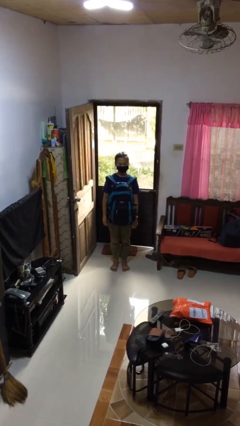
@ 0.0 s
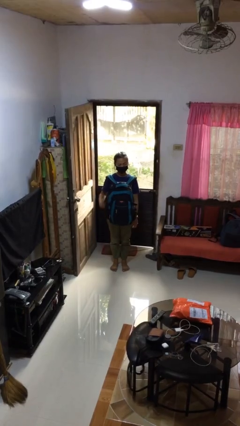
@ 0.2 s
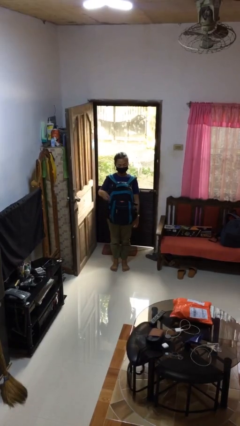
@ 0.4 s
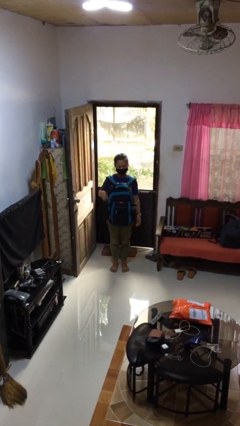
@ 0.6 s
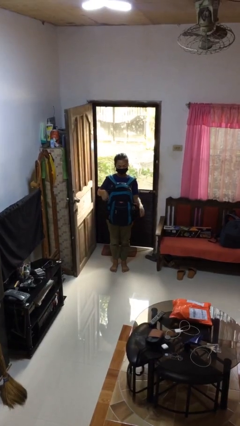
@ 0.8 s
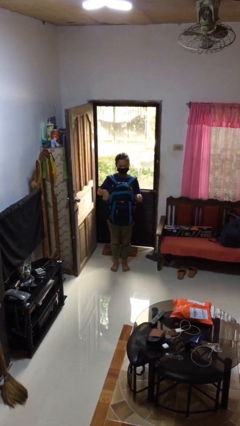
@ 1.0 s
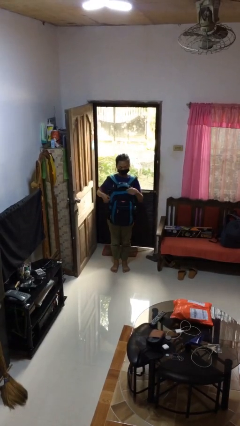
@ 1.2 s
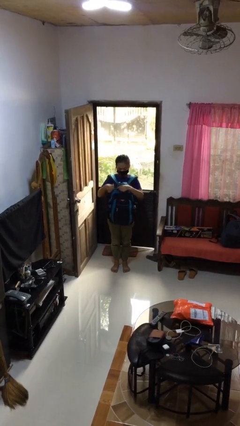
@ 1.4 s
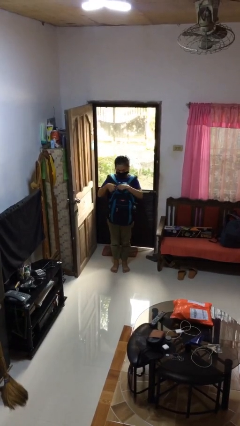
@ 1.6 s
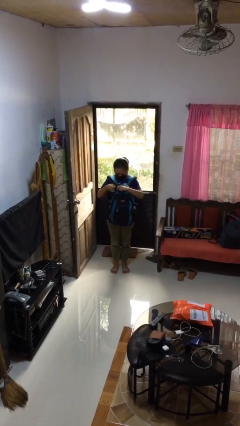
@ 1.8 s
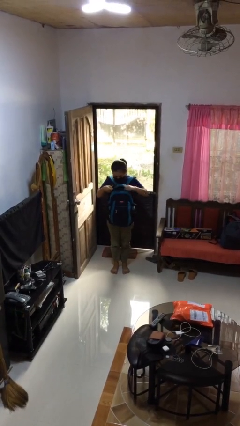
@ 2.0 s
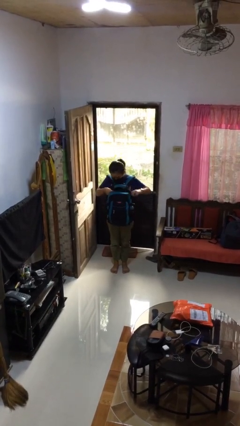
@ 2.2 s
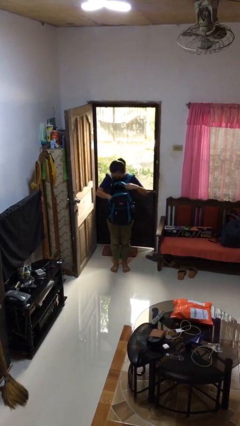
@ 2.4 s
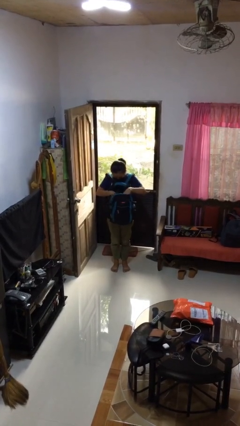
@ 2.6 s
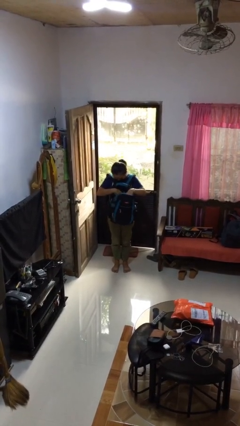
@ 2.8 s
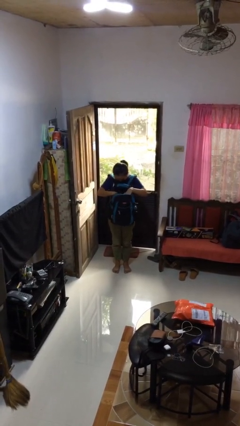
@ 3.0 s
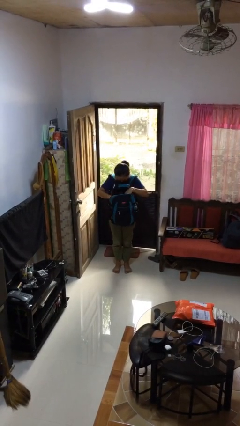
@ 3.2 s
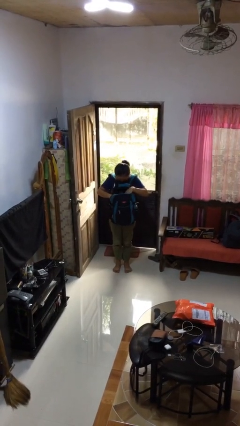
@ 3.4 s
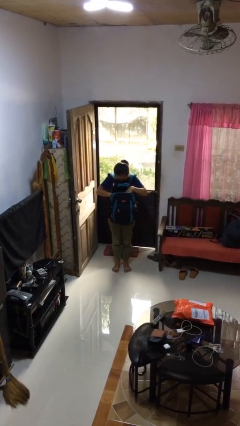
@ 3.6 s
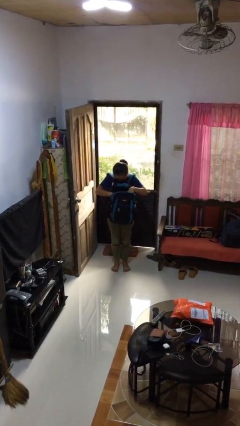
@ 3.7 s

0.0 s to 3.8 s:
person searches in backpack

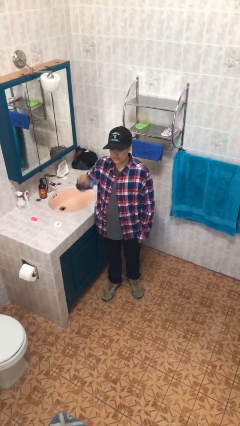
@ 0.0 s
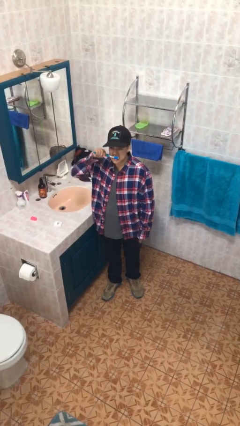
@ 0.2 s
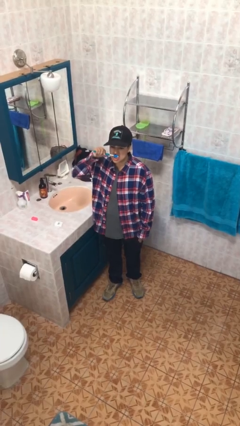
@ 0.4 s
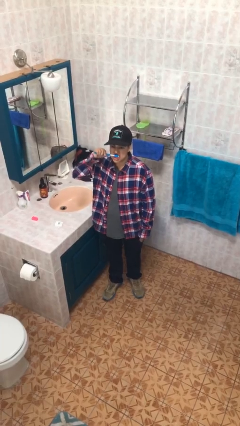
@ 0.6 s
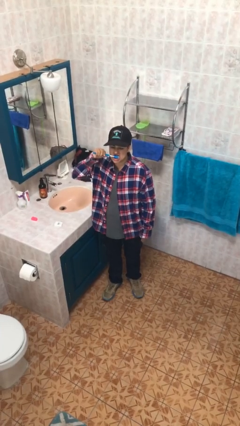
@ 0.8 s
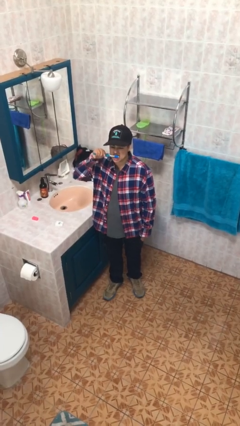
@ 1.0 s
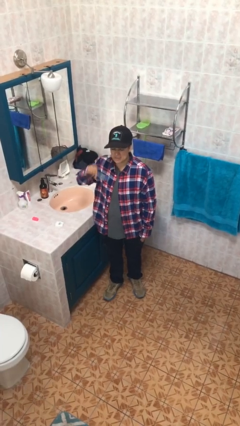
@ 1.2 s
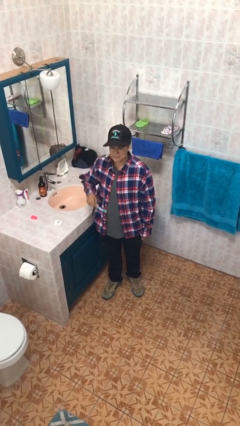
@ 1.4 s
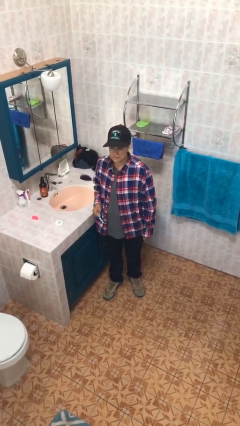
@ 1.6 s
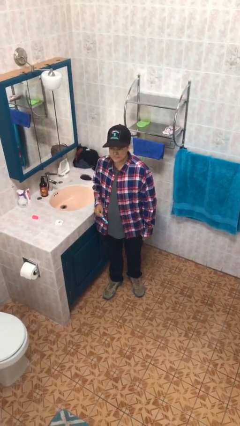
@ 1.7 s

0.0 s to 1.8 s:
person brushes teeth

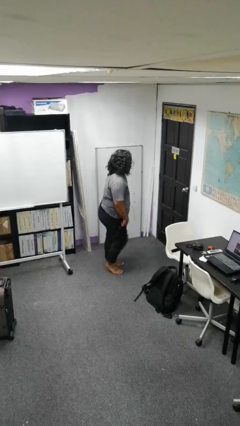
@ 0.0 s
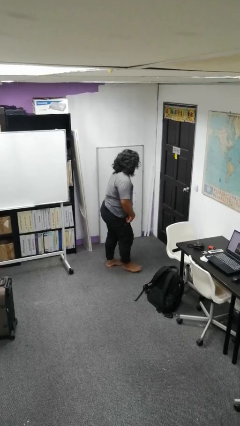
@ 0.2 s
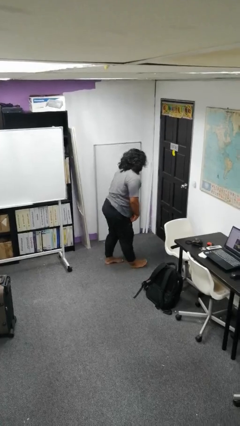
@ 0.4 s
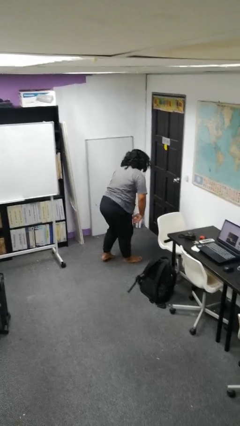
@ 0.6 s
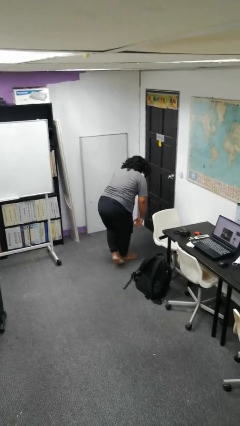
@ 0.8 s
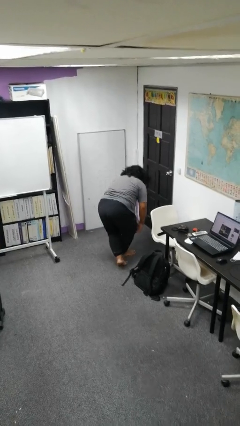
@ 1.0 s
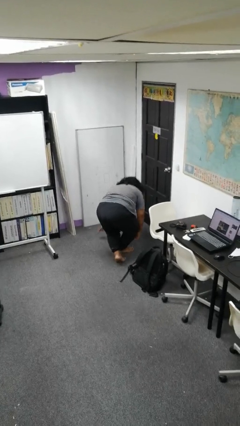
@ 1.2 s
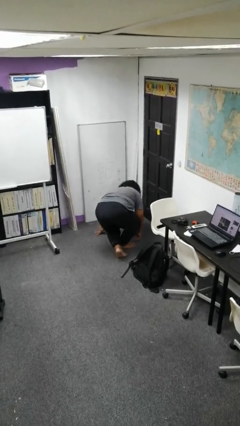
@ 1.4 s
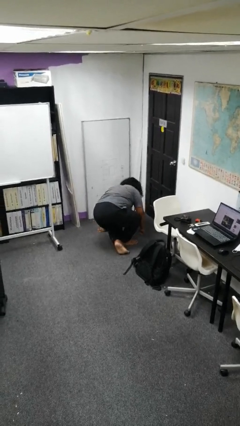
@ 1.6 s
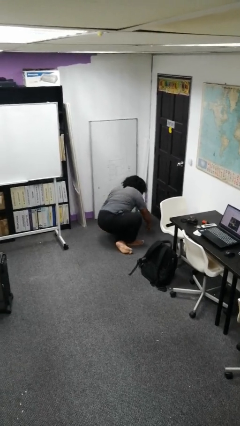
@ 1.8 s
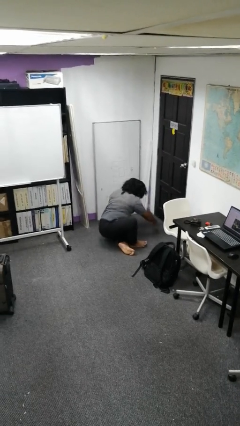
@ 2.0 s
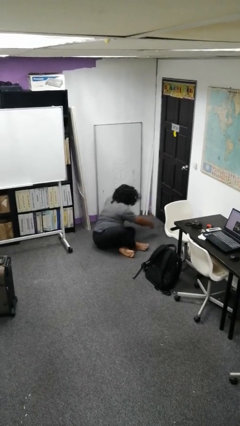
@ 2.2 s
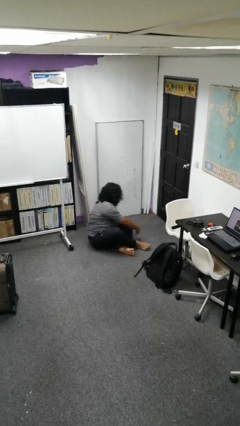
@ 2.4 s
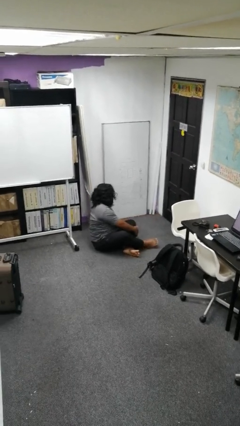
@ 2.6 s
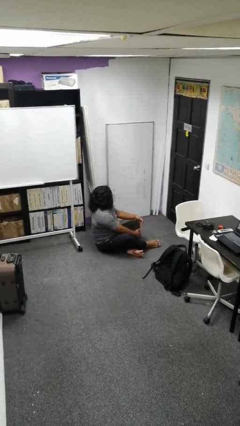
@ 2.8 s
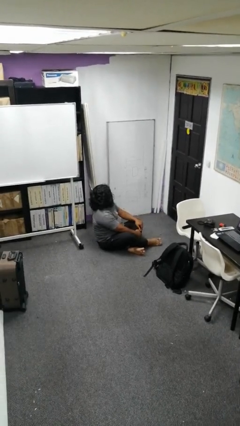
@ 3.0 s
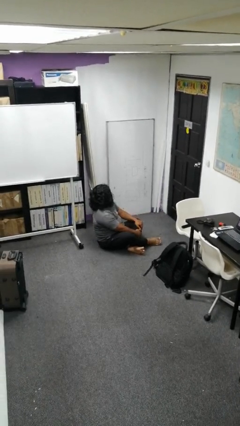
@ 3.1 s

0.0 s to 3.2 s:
person sits crisscross

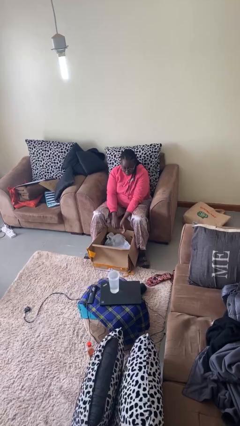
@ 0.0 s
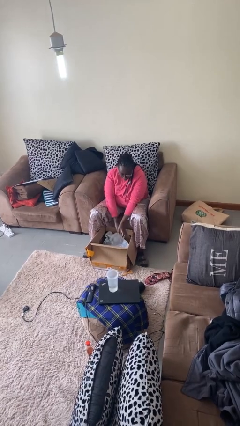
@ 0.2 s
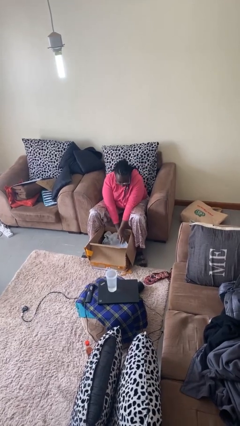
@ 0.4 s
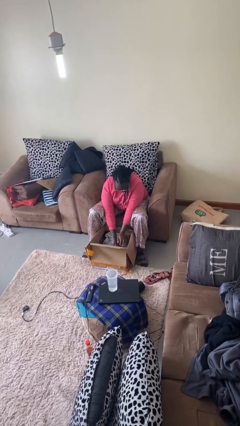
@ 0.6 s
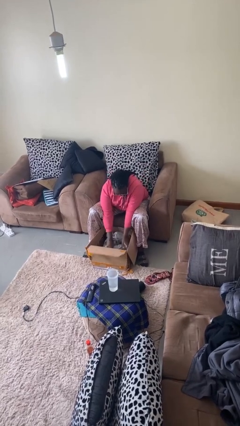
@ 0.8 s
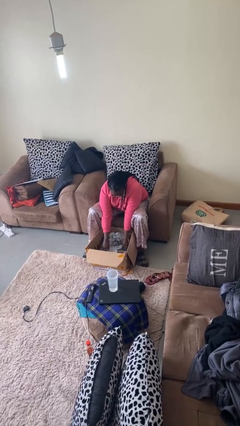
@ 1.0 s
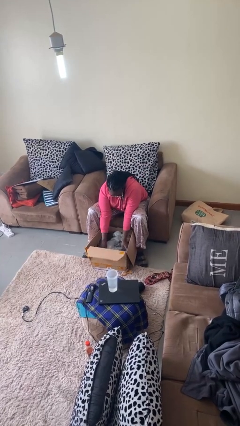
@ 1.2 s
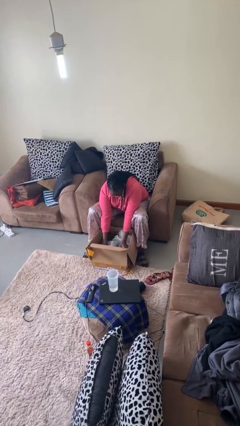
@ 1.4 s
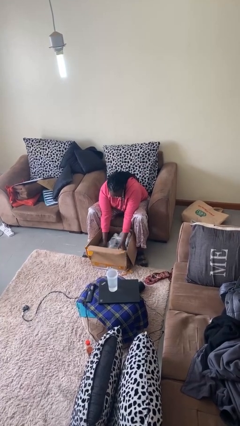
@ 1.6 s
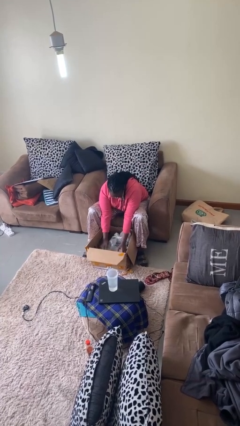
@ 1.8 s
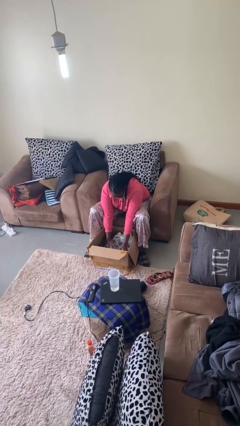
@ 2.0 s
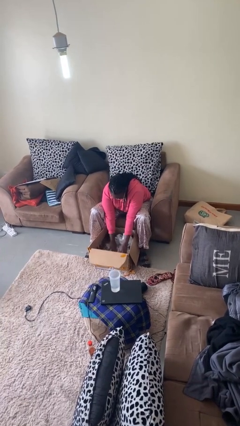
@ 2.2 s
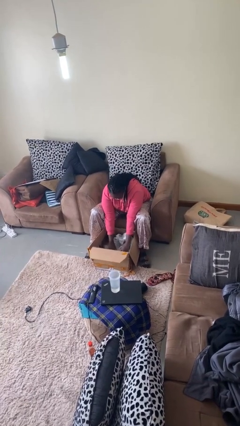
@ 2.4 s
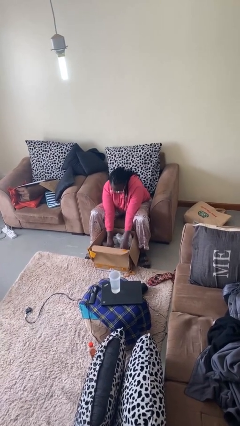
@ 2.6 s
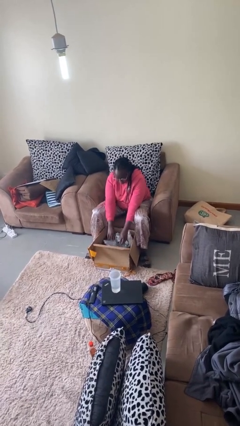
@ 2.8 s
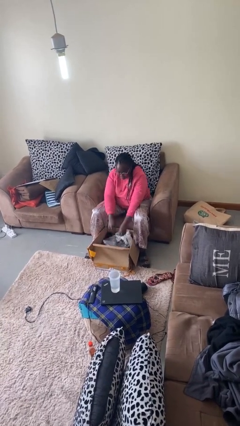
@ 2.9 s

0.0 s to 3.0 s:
person searches in box

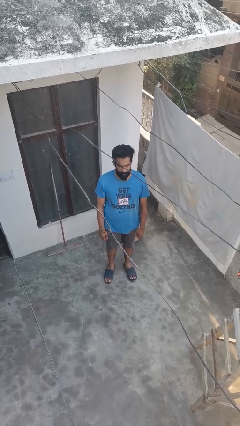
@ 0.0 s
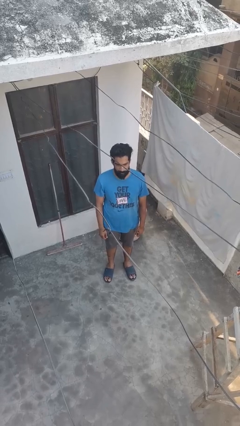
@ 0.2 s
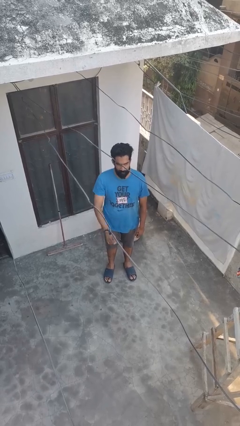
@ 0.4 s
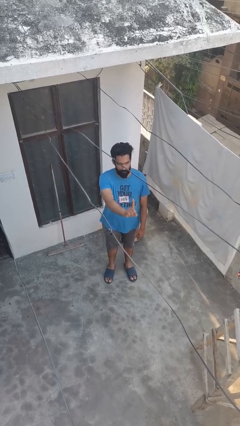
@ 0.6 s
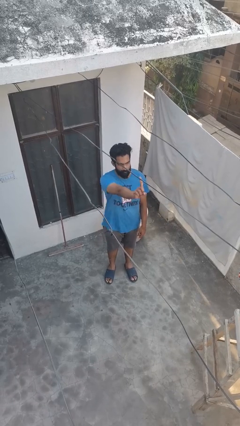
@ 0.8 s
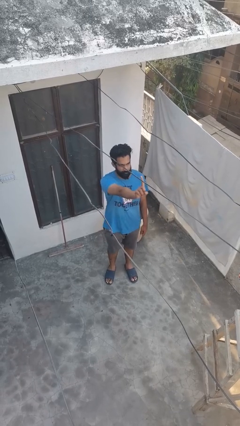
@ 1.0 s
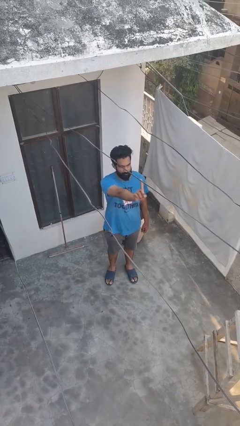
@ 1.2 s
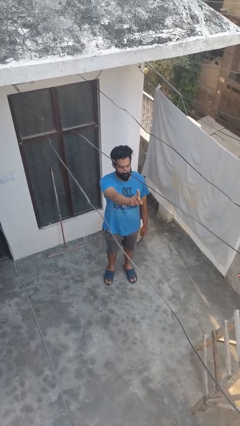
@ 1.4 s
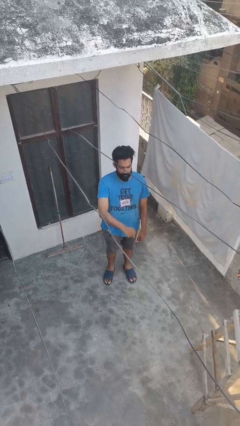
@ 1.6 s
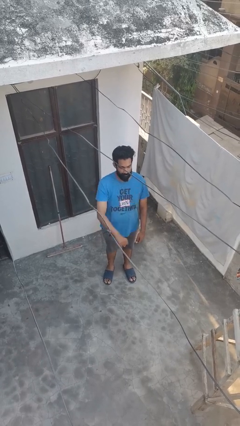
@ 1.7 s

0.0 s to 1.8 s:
person gestures number one

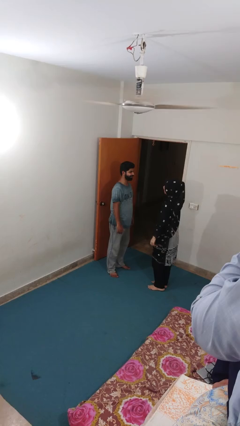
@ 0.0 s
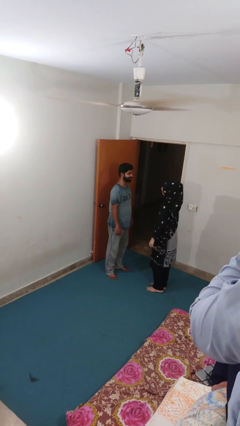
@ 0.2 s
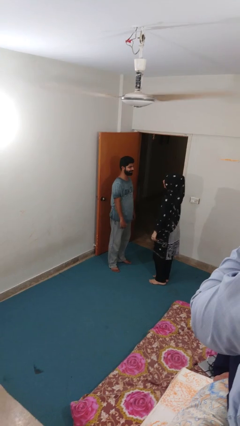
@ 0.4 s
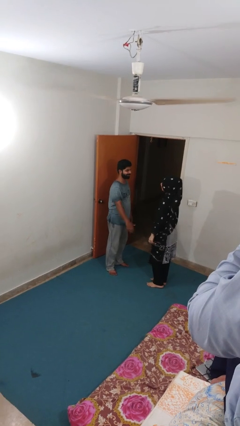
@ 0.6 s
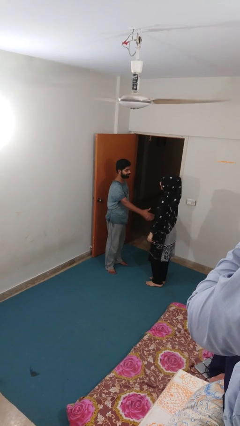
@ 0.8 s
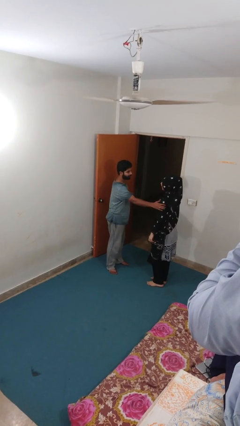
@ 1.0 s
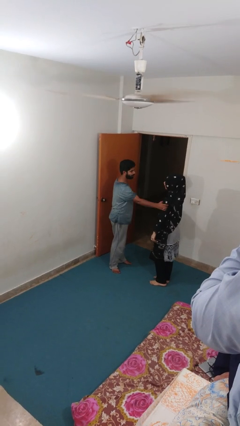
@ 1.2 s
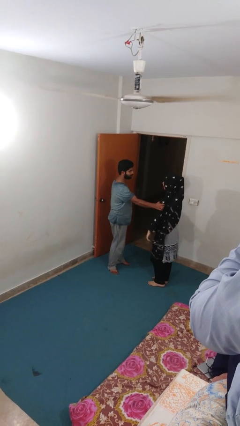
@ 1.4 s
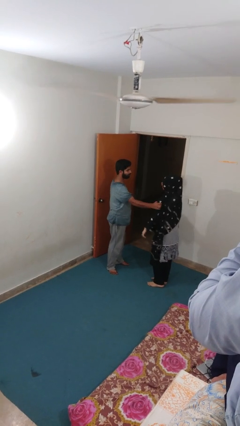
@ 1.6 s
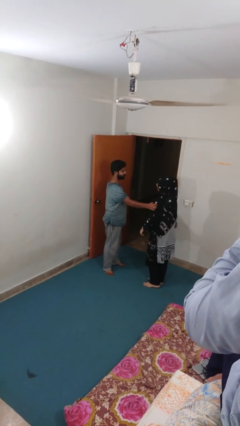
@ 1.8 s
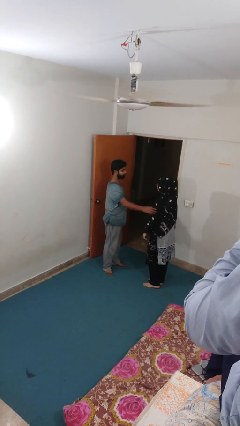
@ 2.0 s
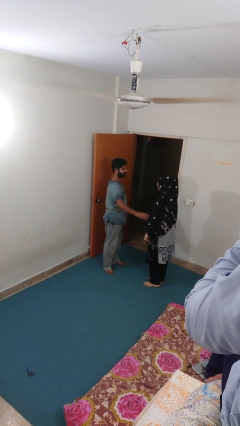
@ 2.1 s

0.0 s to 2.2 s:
person grabs person by bicep

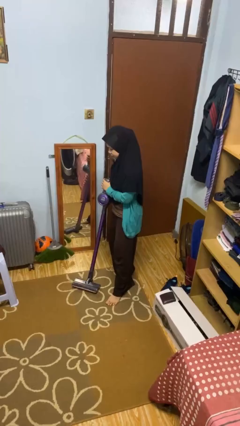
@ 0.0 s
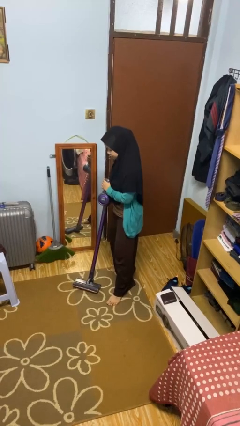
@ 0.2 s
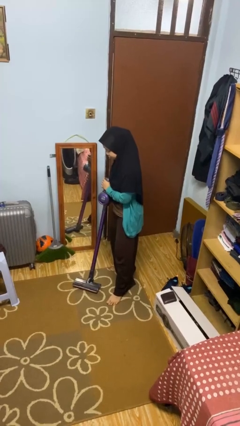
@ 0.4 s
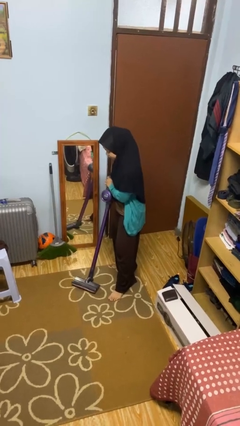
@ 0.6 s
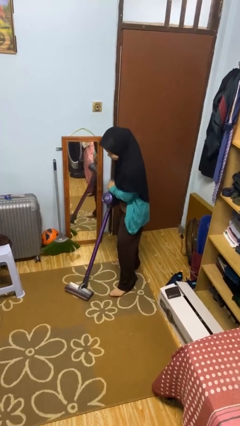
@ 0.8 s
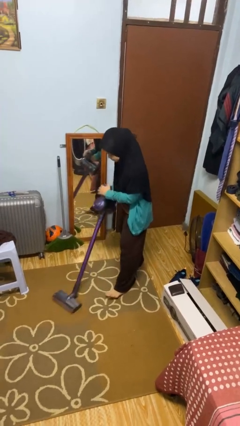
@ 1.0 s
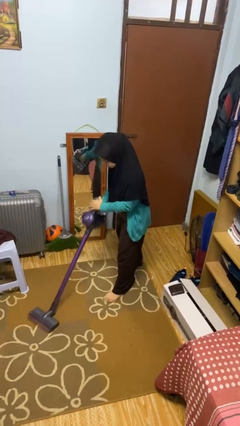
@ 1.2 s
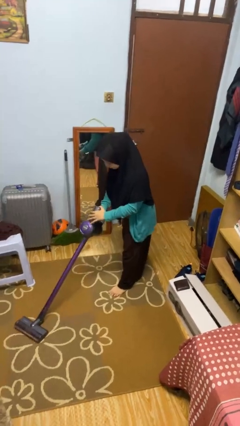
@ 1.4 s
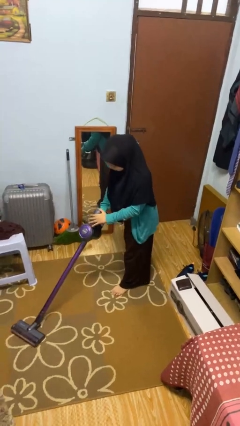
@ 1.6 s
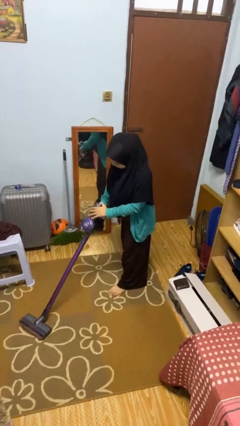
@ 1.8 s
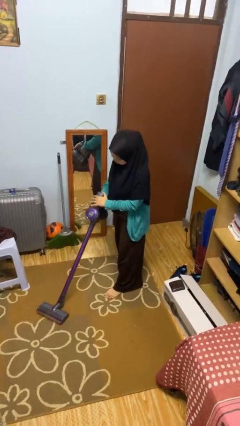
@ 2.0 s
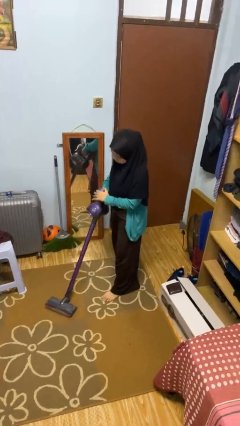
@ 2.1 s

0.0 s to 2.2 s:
person vacuums carpet
